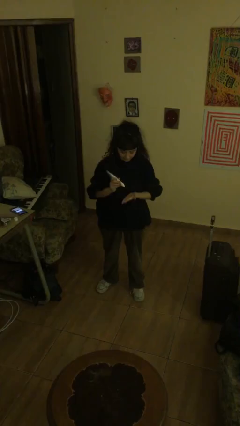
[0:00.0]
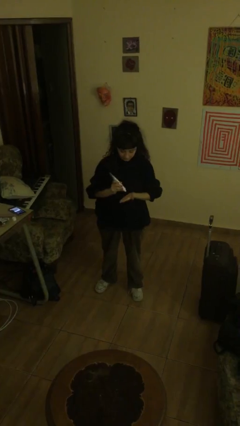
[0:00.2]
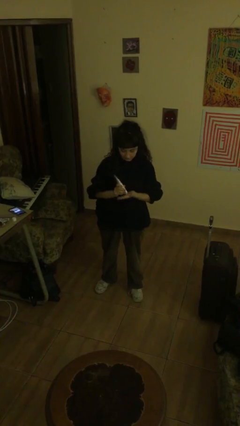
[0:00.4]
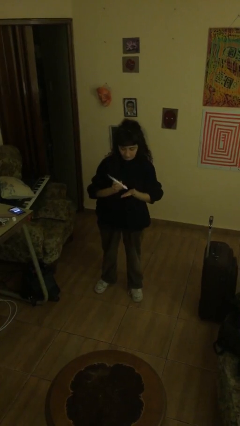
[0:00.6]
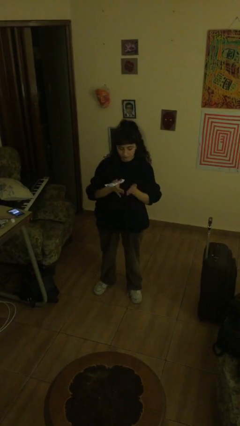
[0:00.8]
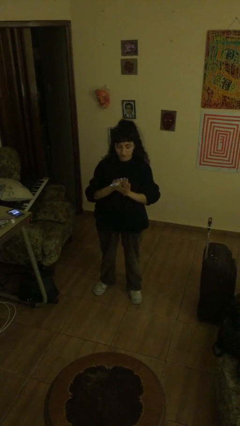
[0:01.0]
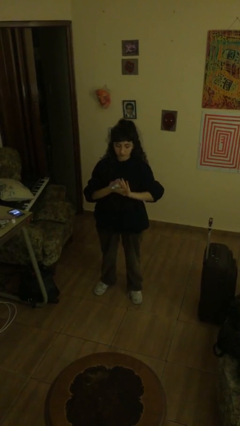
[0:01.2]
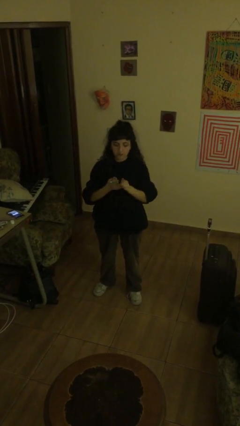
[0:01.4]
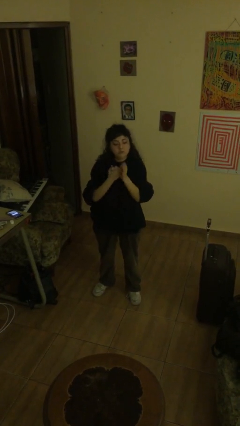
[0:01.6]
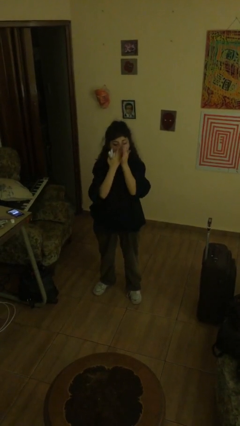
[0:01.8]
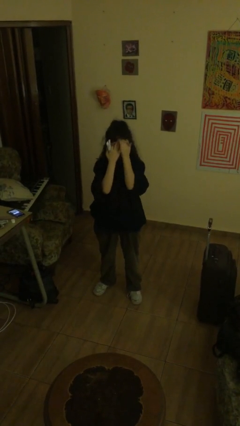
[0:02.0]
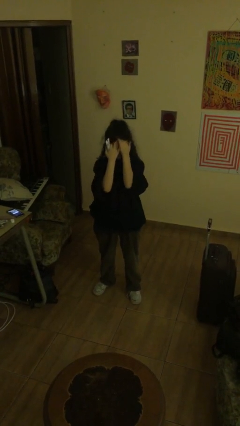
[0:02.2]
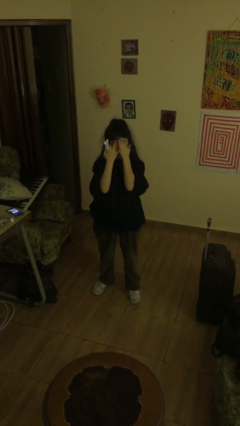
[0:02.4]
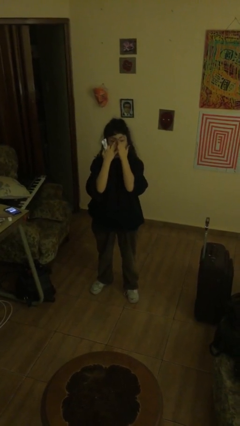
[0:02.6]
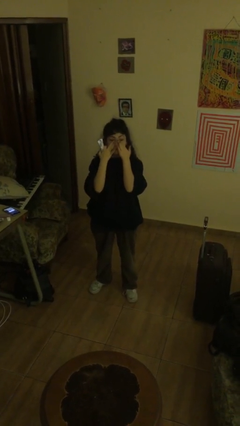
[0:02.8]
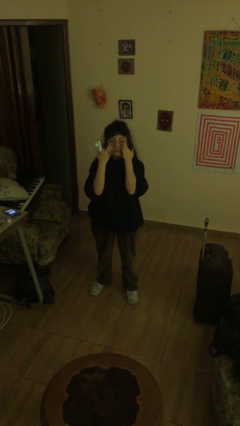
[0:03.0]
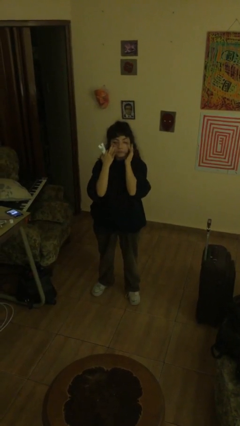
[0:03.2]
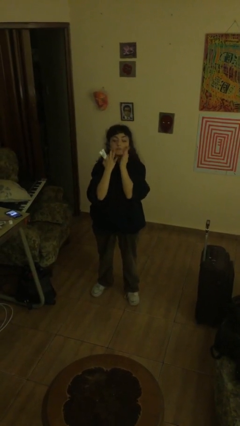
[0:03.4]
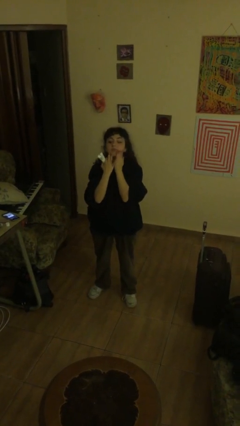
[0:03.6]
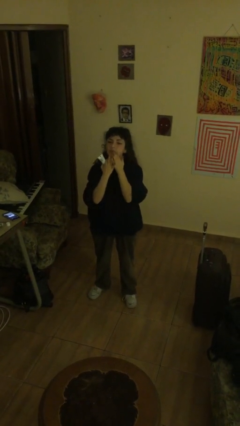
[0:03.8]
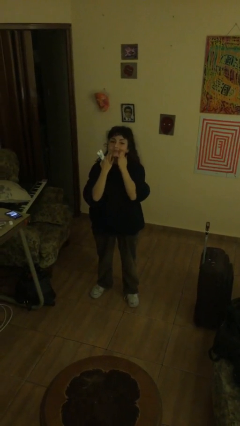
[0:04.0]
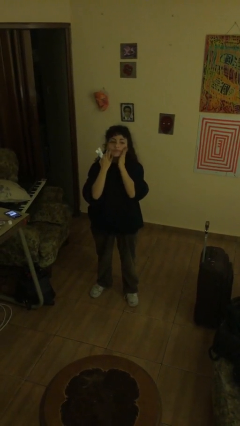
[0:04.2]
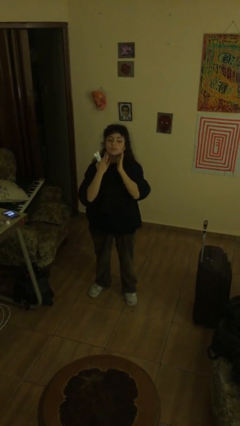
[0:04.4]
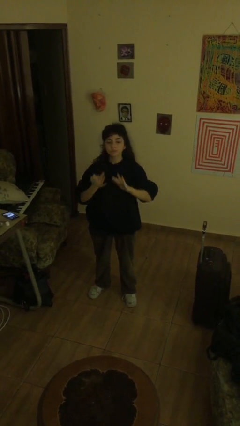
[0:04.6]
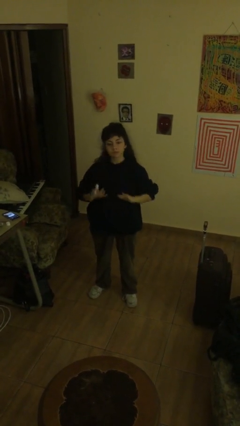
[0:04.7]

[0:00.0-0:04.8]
person applies sunscreen

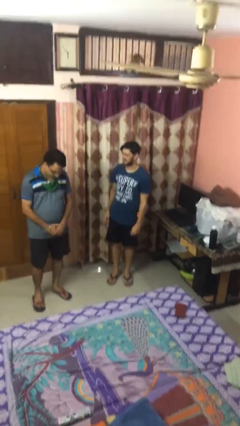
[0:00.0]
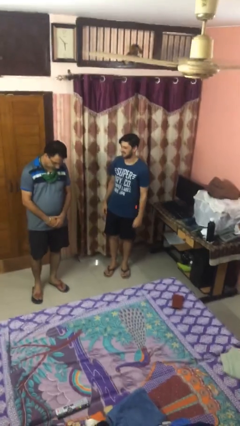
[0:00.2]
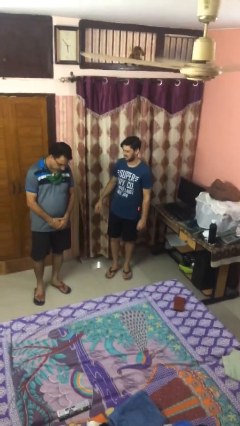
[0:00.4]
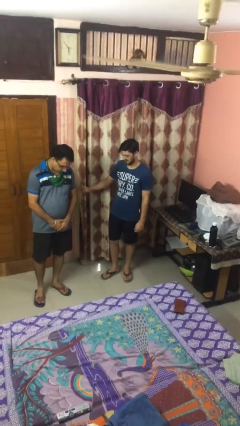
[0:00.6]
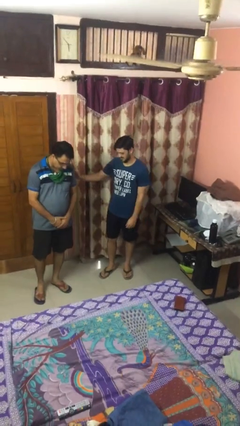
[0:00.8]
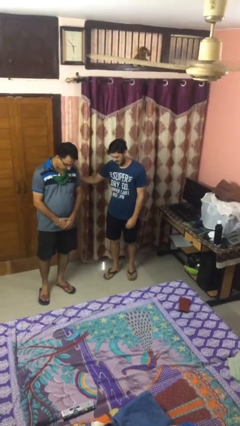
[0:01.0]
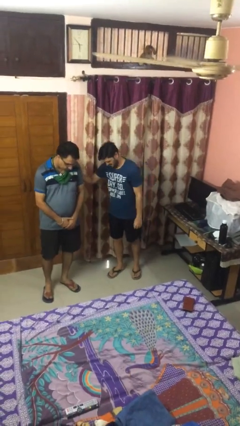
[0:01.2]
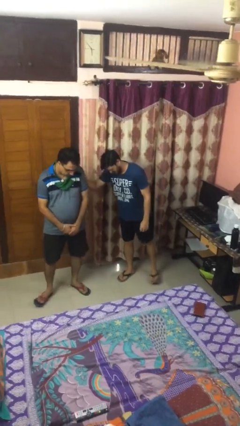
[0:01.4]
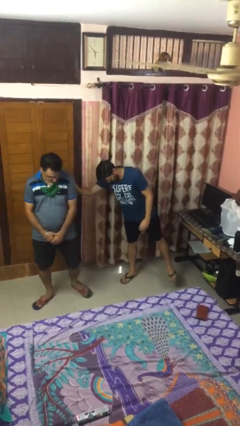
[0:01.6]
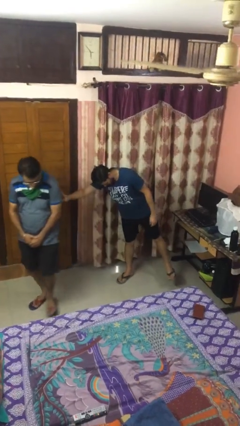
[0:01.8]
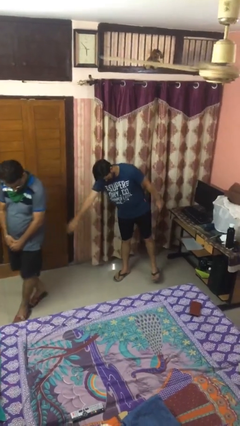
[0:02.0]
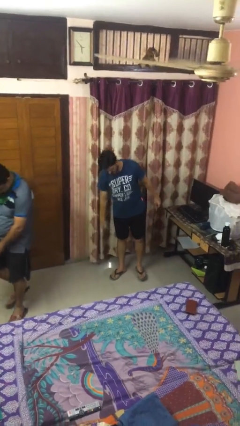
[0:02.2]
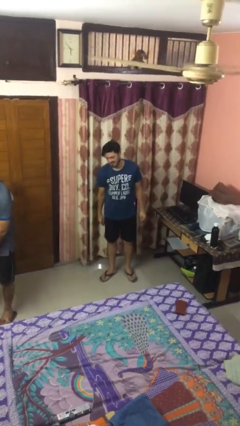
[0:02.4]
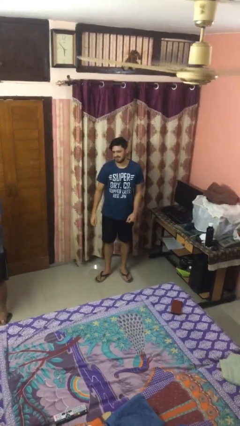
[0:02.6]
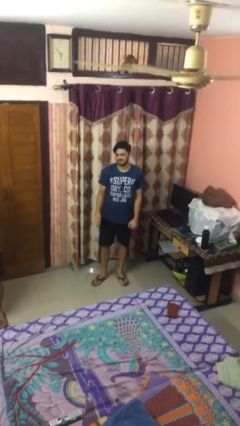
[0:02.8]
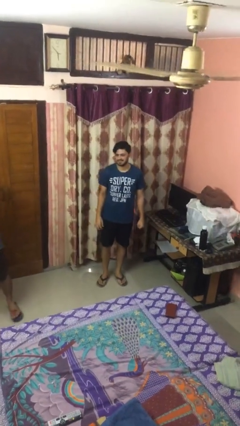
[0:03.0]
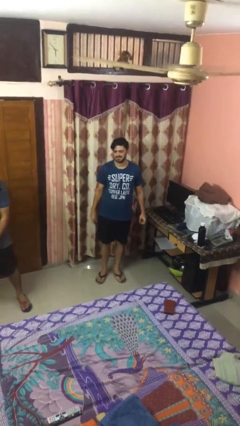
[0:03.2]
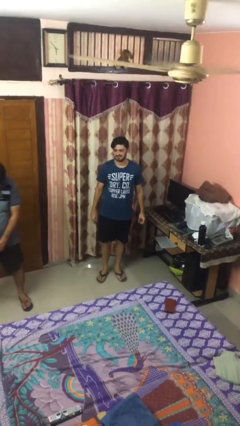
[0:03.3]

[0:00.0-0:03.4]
person shoves person

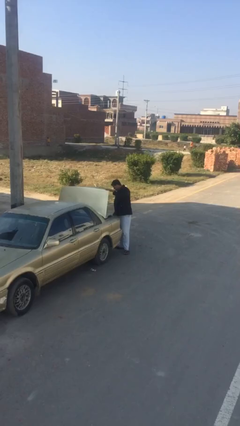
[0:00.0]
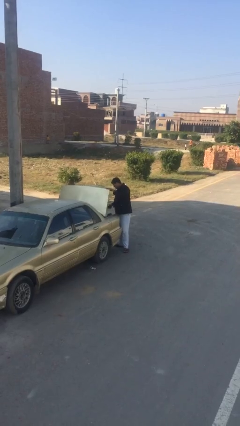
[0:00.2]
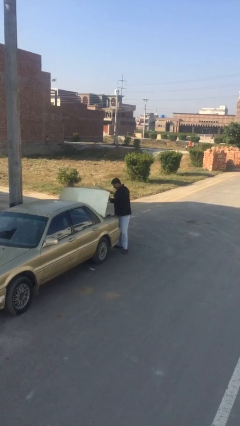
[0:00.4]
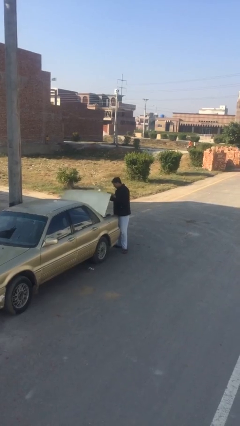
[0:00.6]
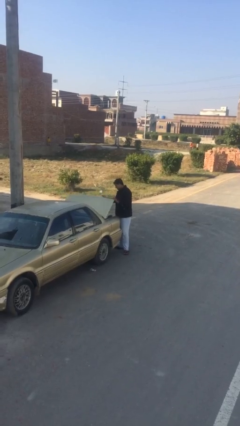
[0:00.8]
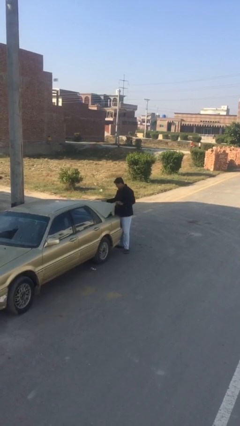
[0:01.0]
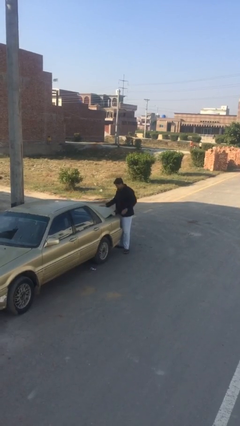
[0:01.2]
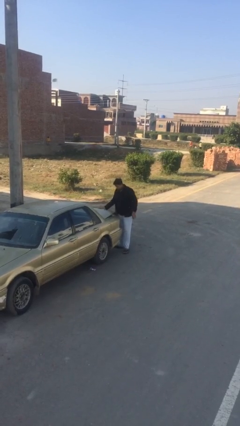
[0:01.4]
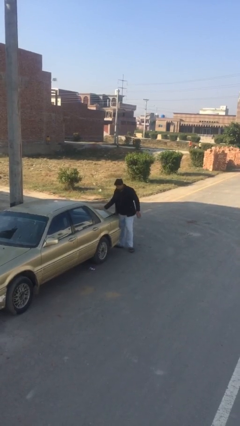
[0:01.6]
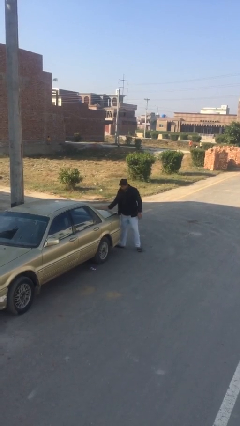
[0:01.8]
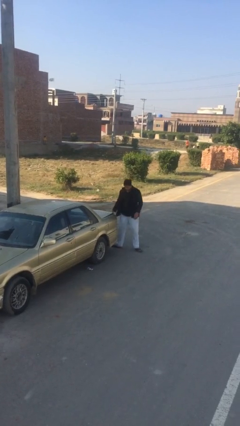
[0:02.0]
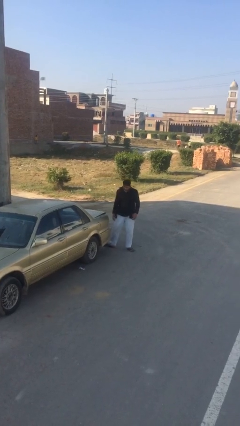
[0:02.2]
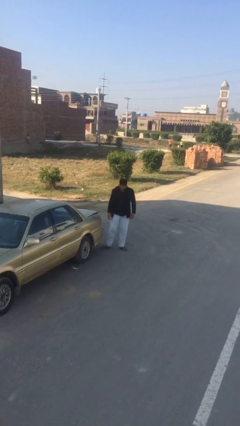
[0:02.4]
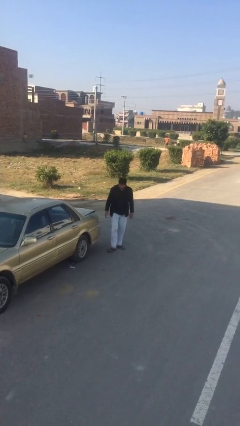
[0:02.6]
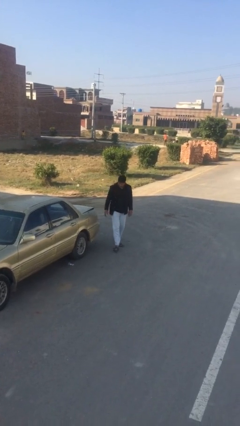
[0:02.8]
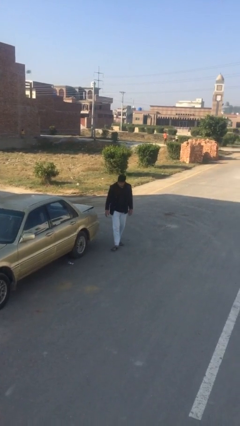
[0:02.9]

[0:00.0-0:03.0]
person closes car trunk

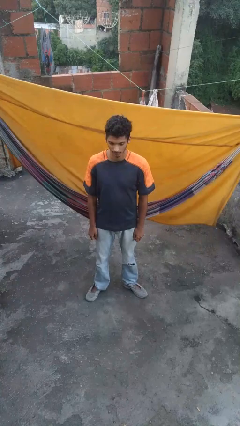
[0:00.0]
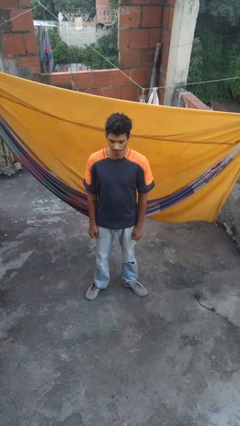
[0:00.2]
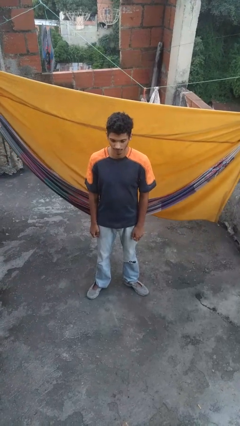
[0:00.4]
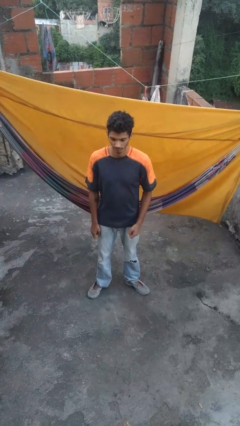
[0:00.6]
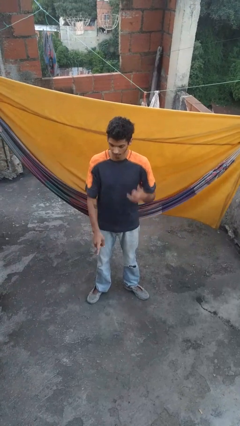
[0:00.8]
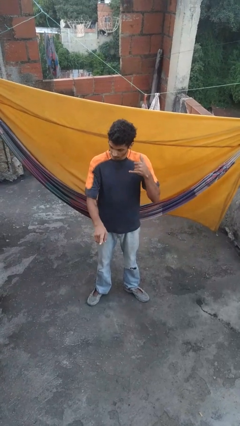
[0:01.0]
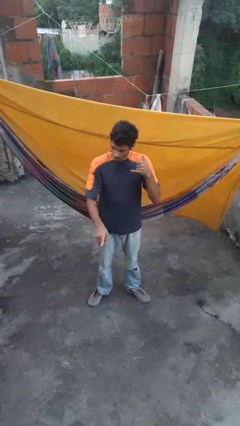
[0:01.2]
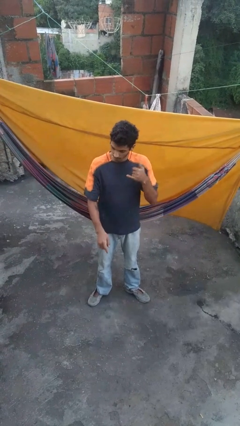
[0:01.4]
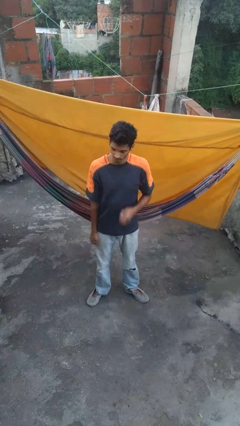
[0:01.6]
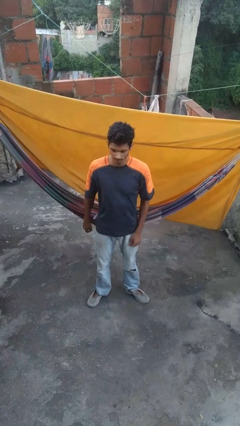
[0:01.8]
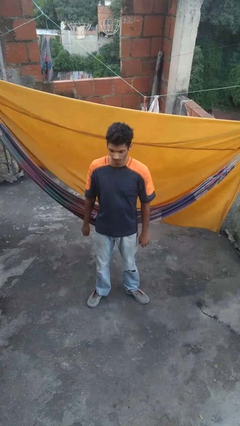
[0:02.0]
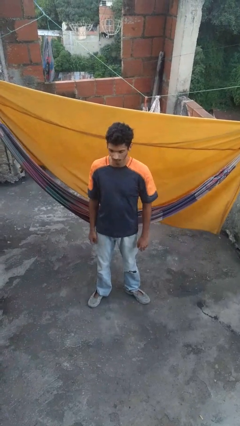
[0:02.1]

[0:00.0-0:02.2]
person gestures call me

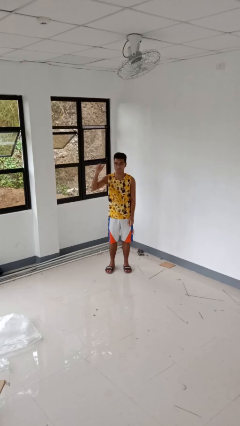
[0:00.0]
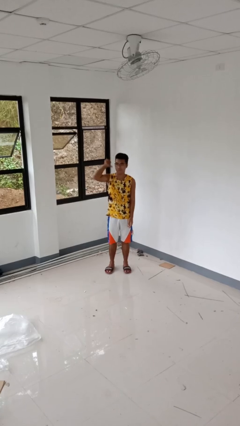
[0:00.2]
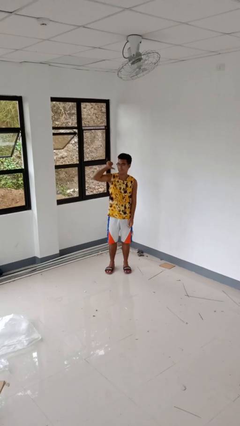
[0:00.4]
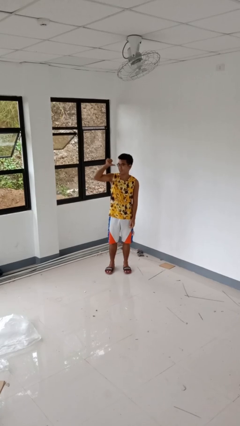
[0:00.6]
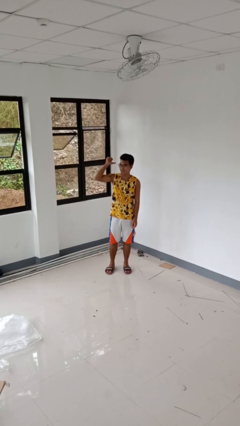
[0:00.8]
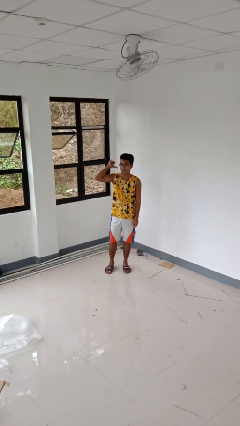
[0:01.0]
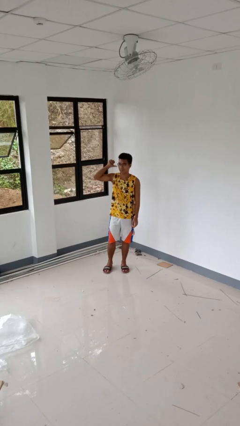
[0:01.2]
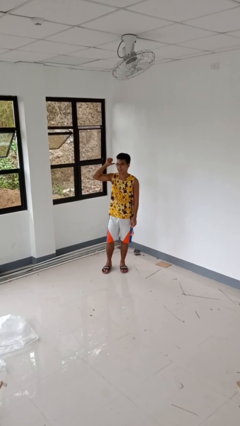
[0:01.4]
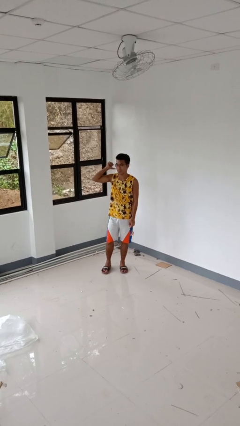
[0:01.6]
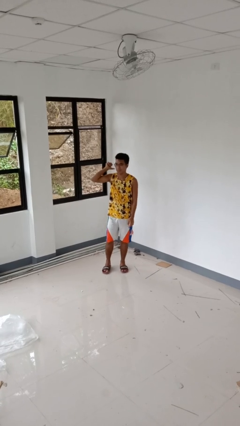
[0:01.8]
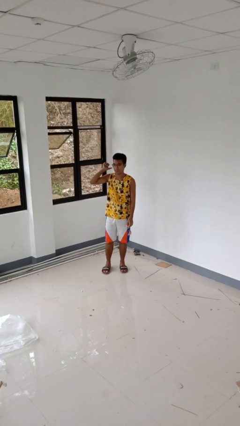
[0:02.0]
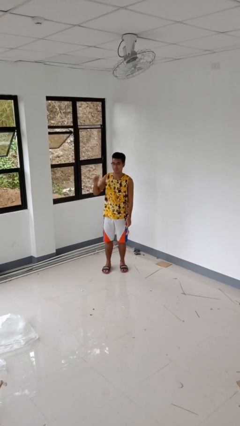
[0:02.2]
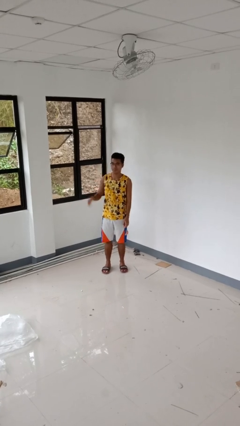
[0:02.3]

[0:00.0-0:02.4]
person gestures behind me

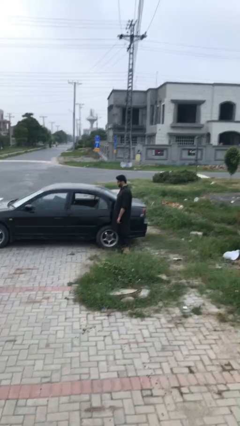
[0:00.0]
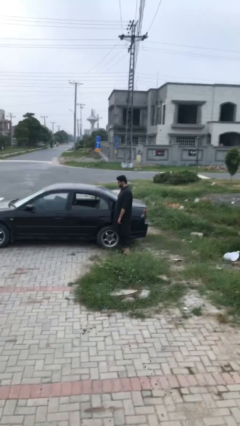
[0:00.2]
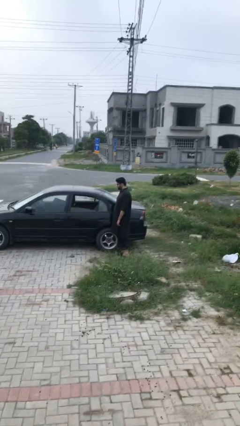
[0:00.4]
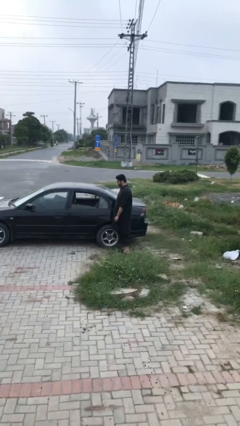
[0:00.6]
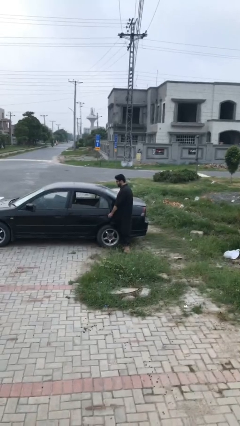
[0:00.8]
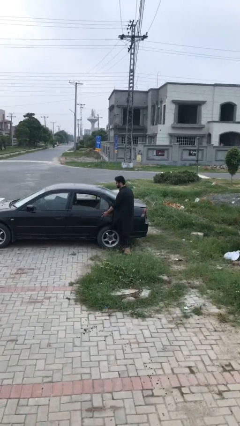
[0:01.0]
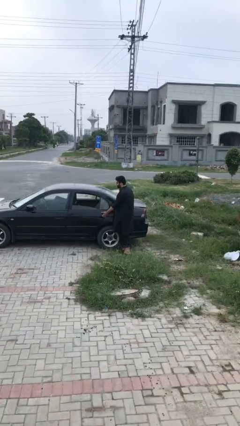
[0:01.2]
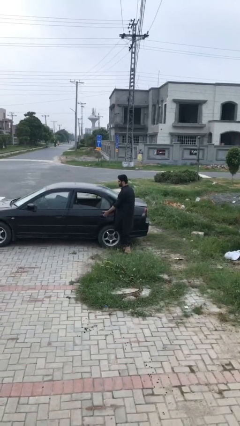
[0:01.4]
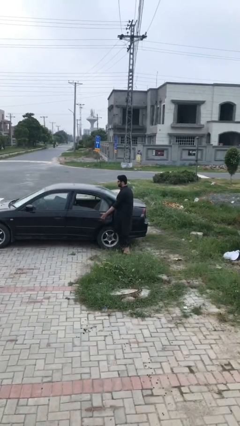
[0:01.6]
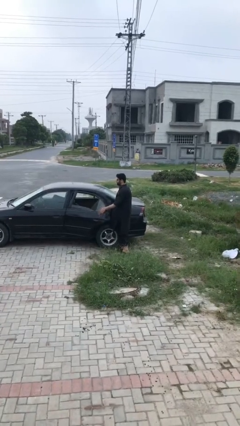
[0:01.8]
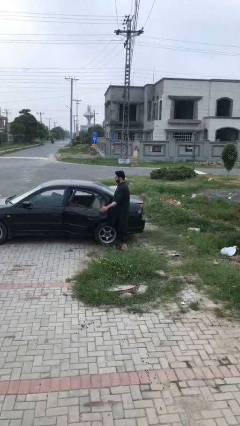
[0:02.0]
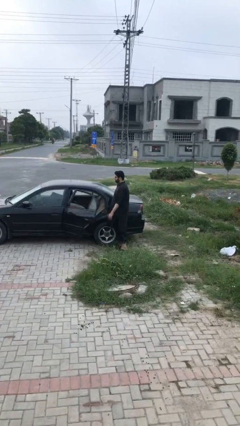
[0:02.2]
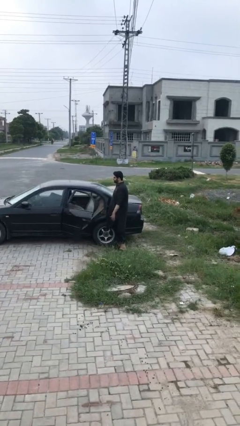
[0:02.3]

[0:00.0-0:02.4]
person opens car door
